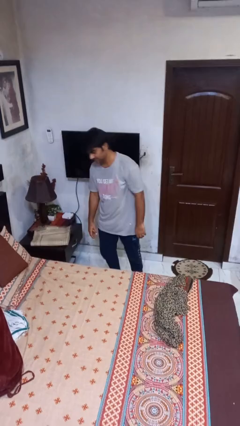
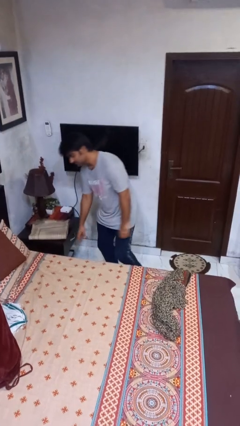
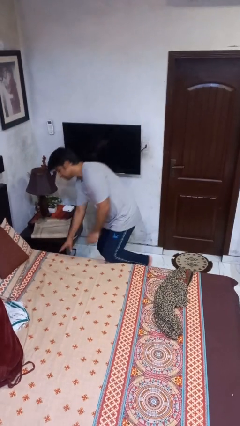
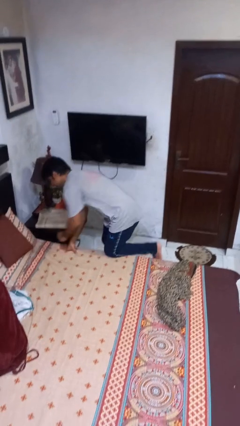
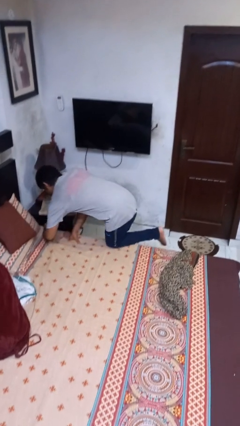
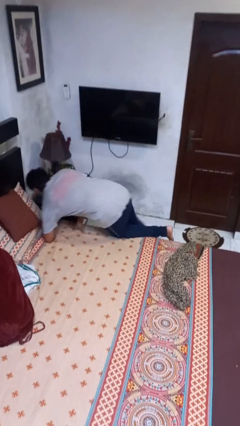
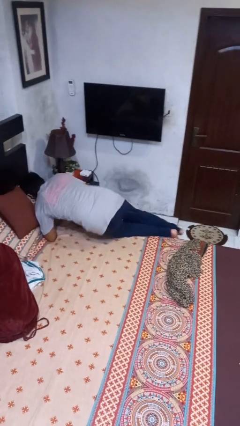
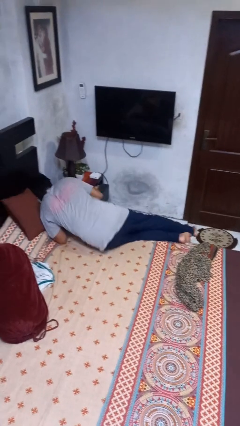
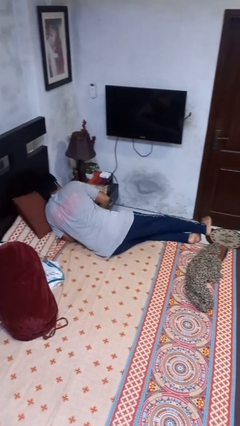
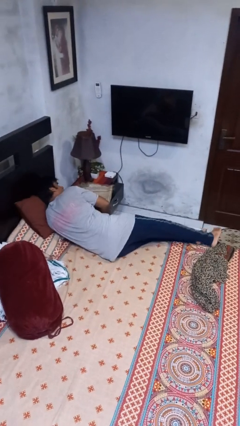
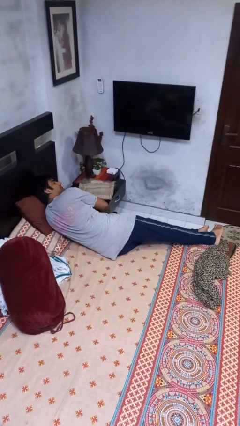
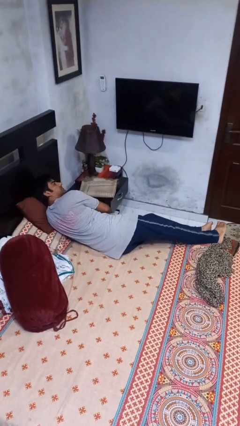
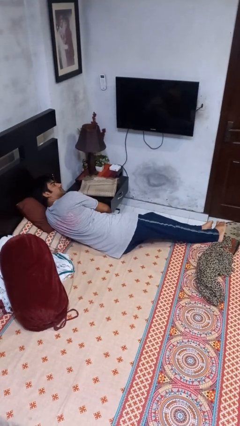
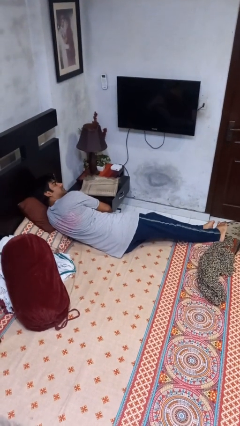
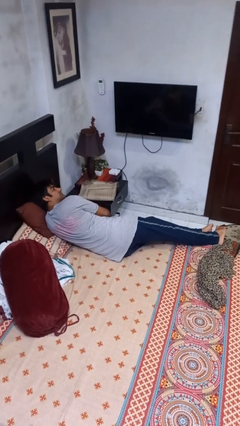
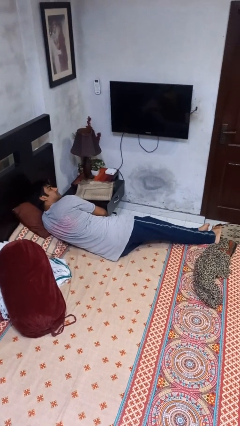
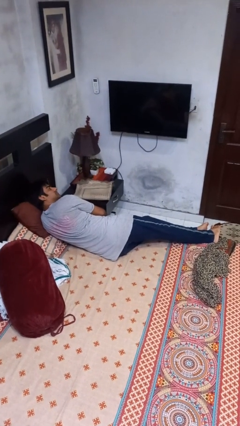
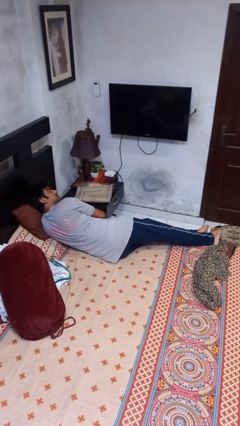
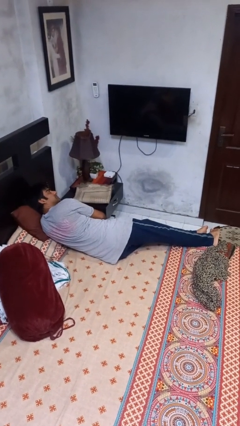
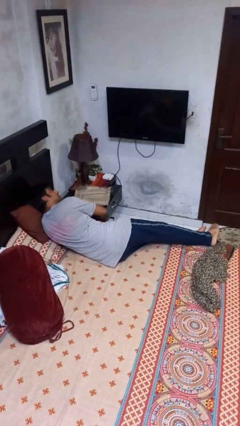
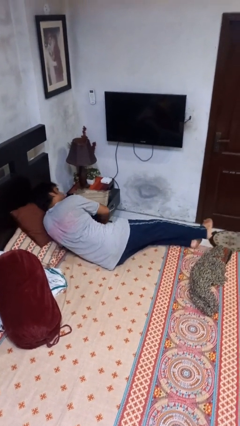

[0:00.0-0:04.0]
person lies down on bed

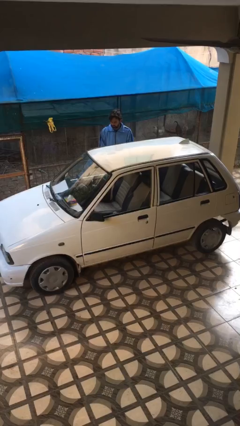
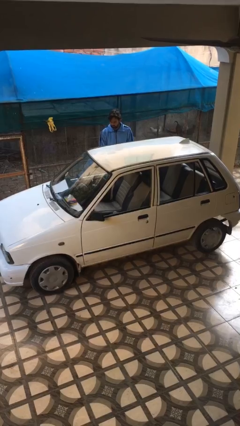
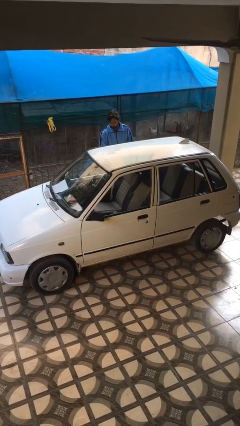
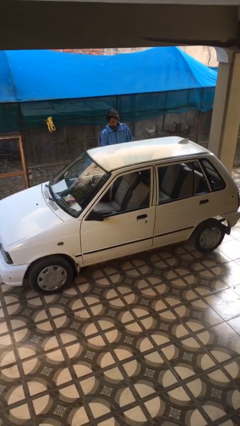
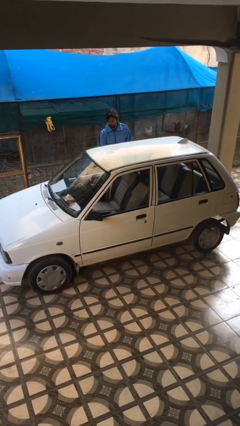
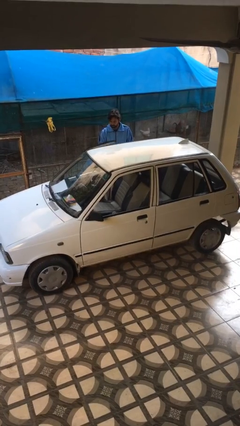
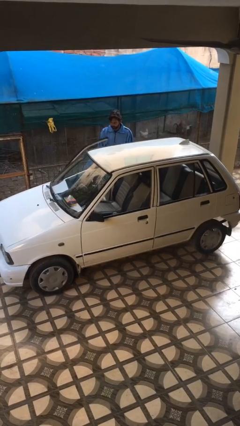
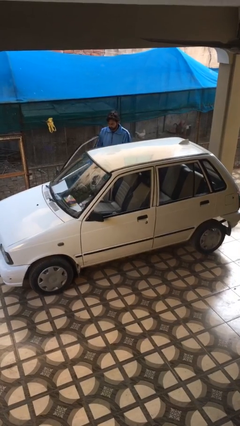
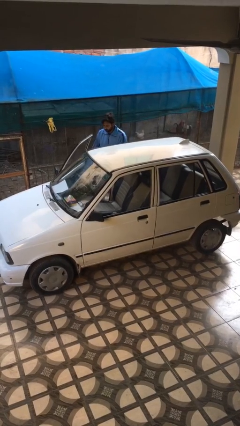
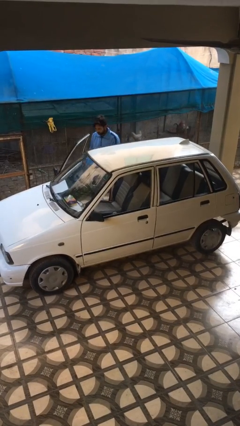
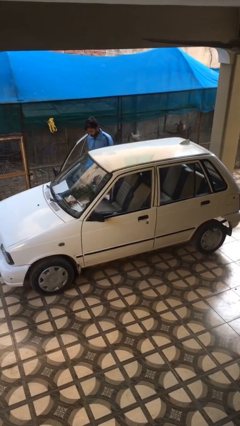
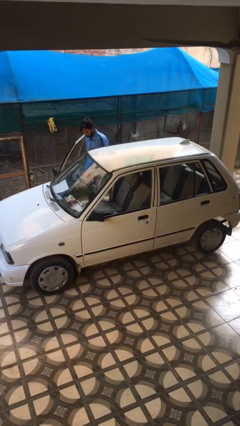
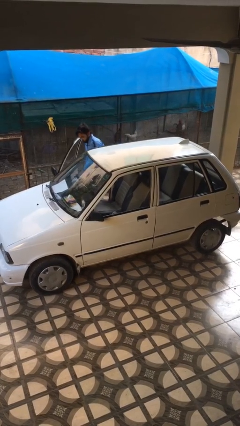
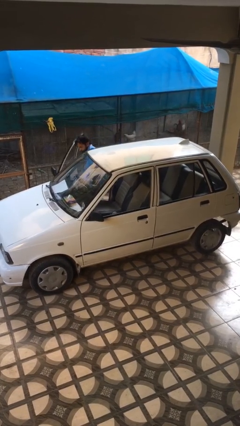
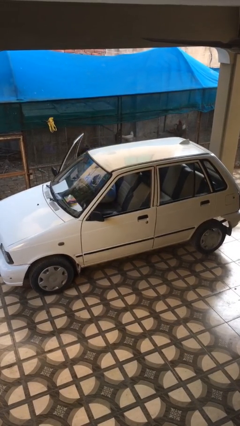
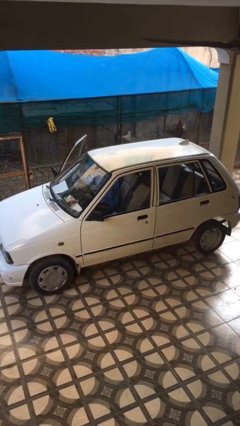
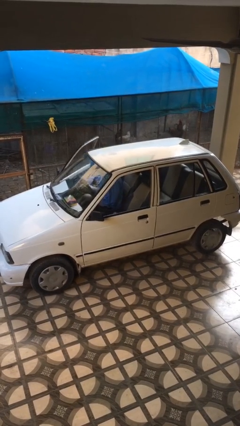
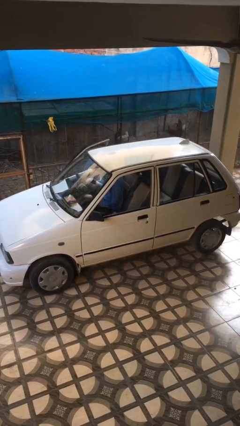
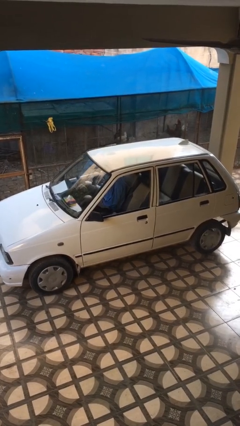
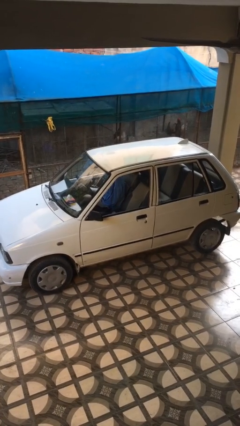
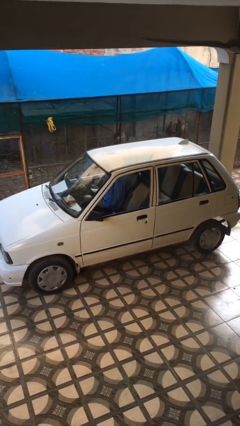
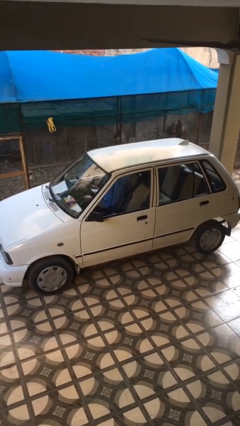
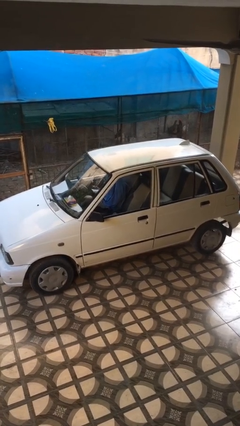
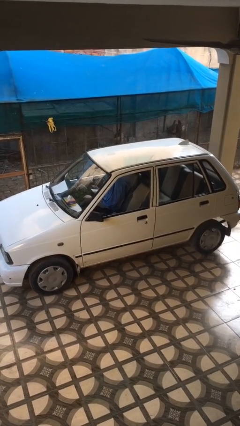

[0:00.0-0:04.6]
car picks up person

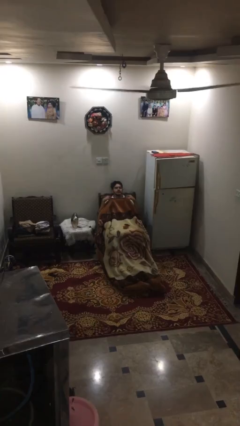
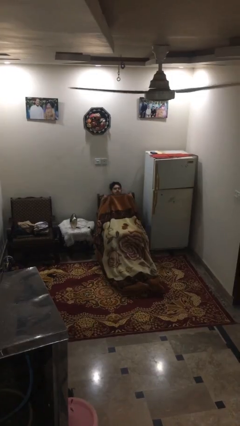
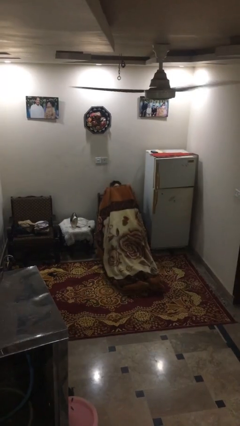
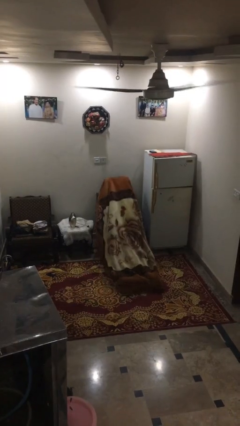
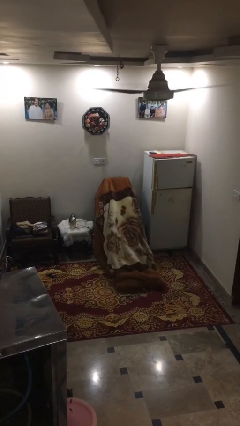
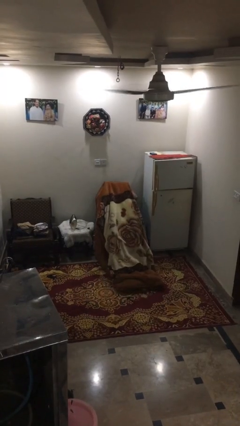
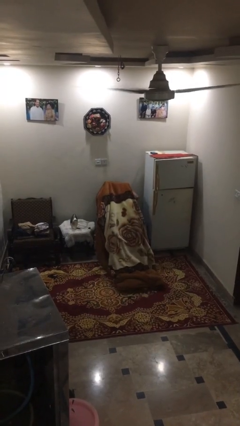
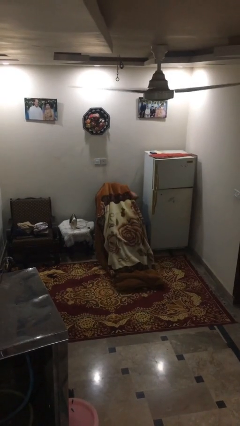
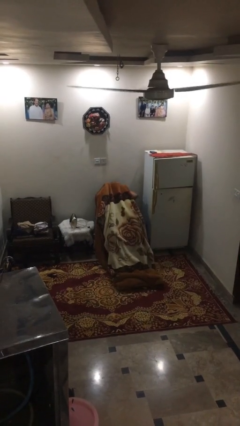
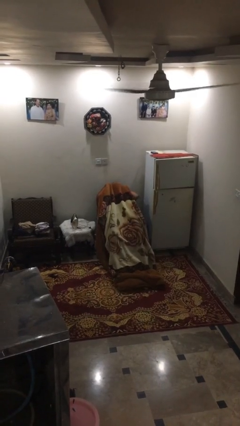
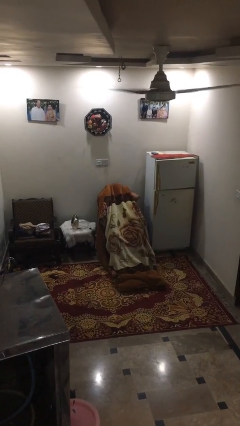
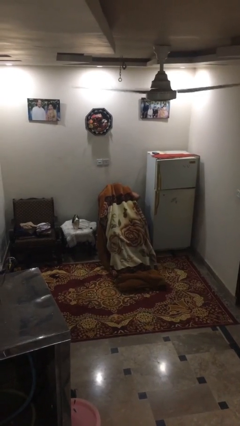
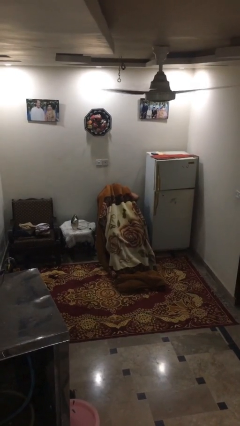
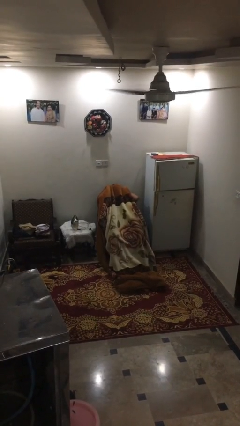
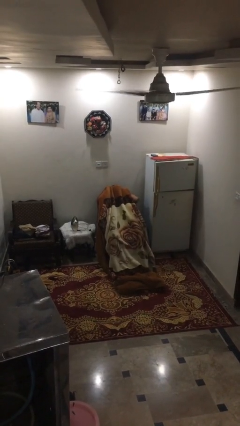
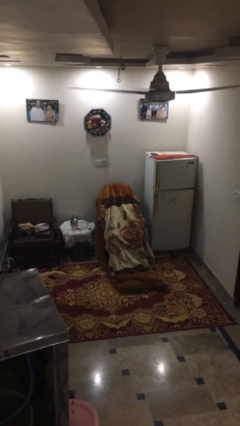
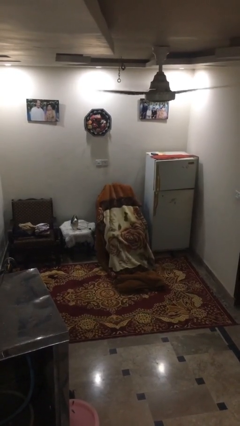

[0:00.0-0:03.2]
person covers with blanket

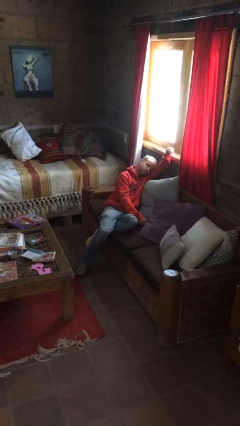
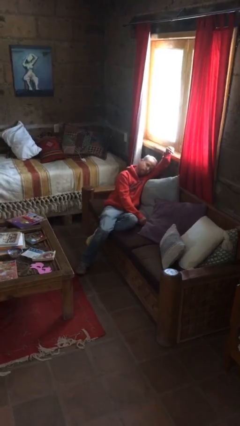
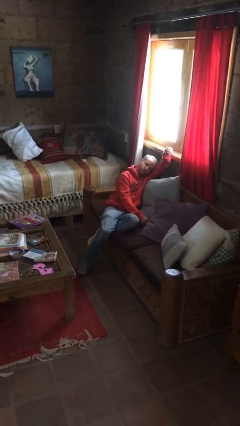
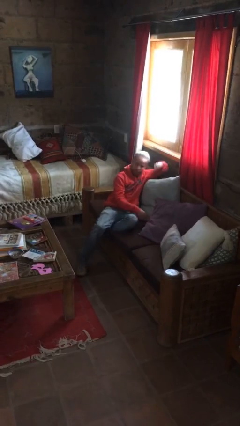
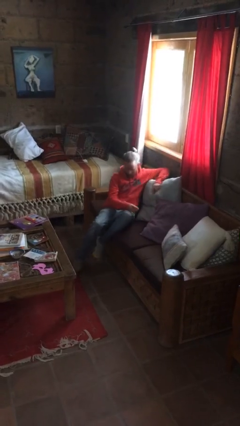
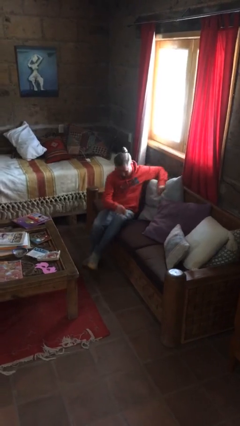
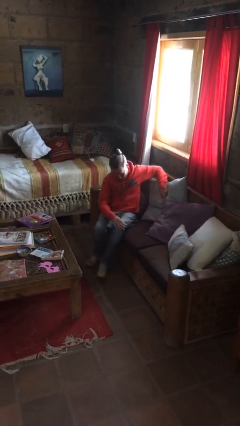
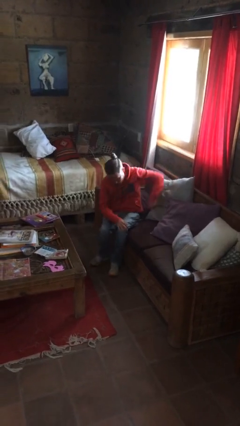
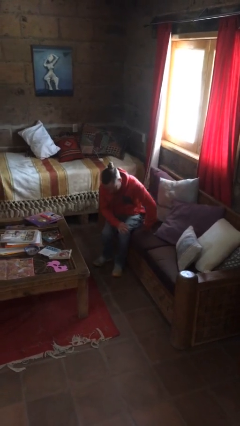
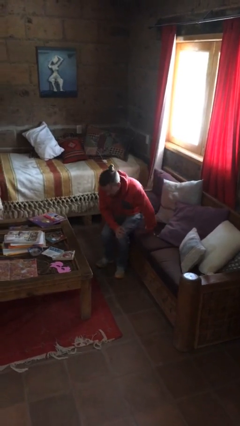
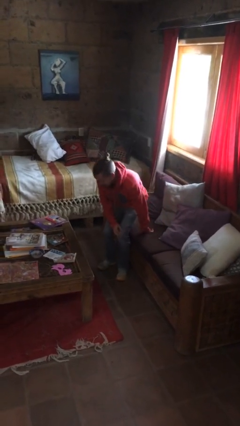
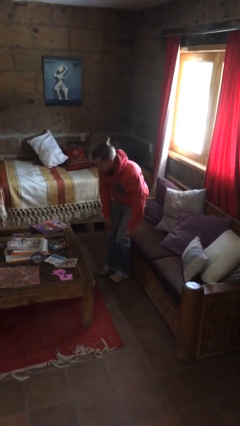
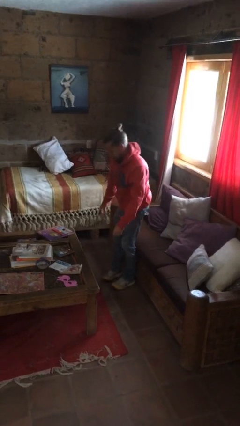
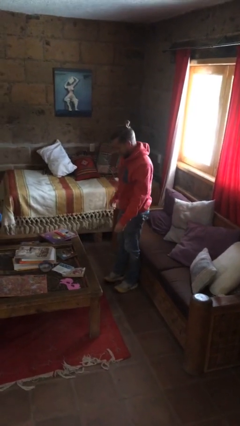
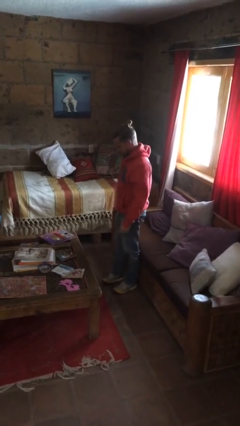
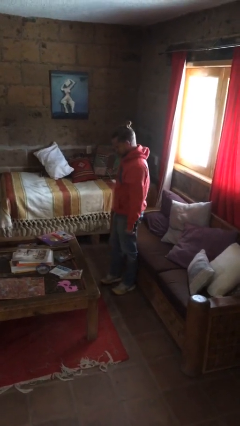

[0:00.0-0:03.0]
person stands up

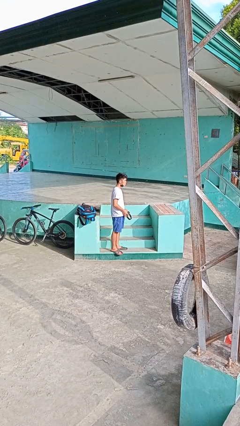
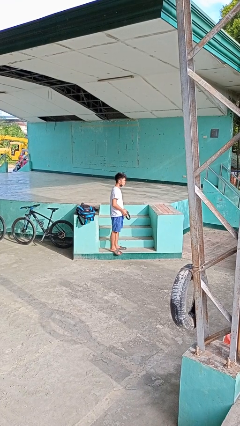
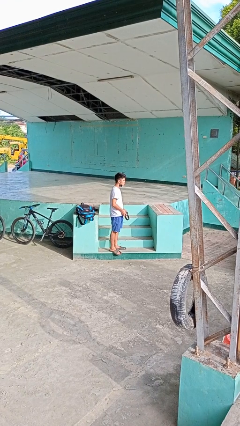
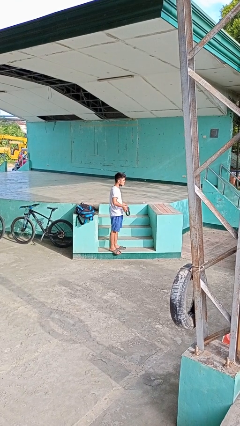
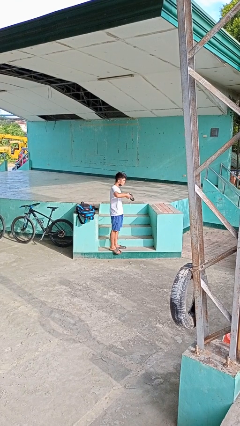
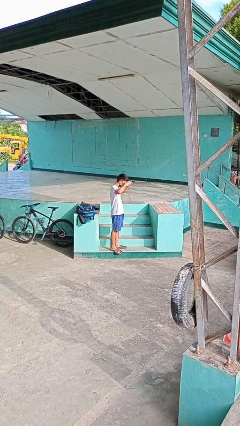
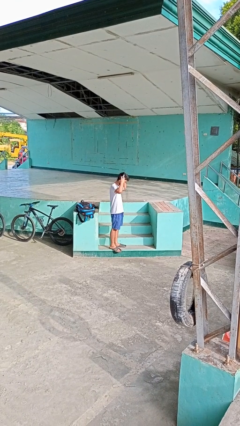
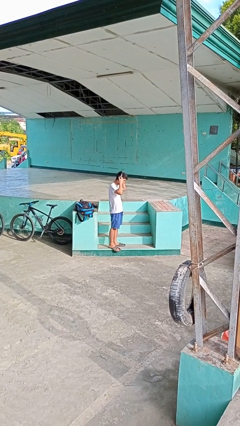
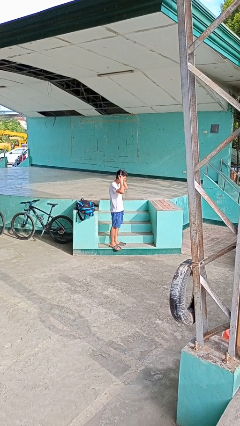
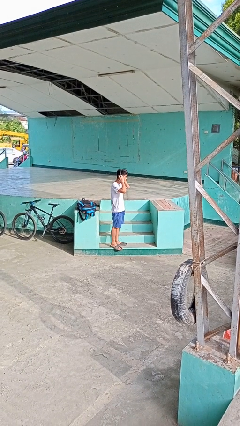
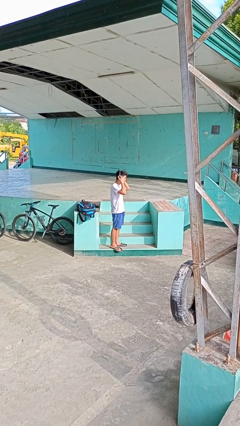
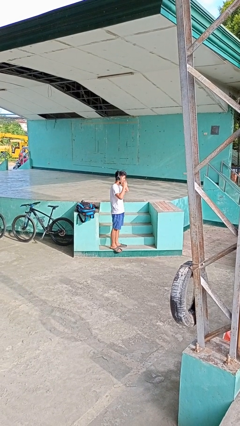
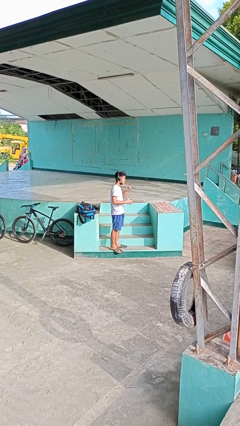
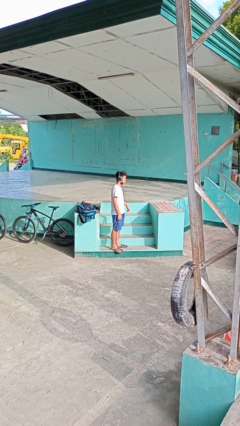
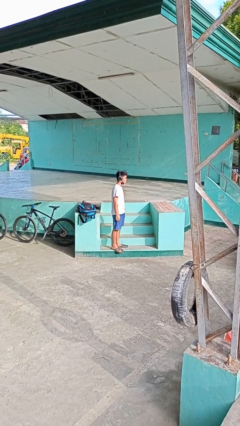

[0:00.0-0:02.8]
person puts on headphones

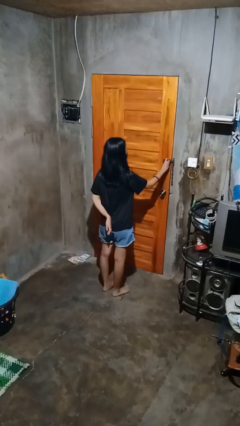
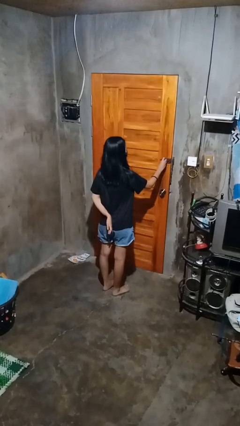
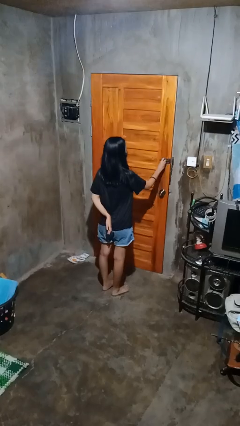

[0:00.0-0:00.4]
person unlocks door with keys
